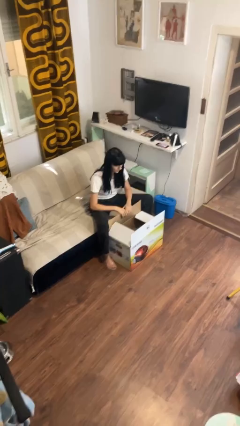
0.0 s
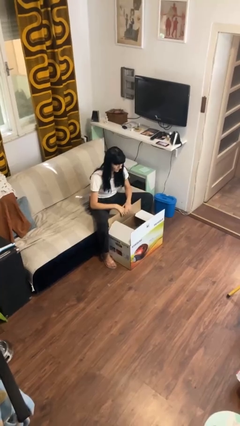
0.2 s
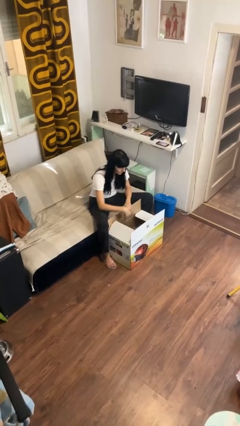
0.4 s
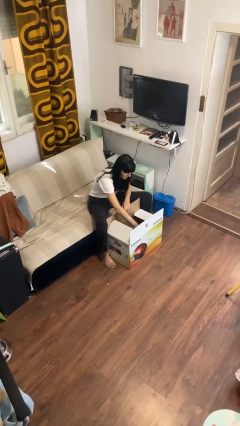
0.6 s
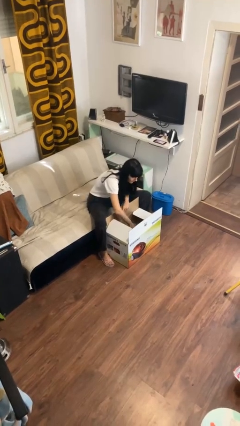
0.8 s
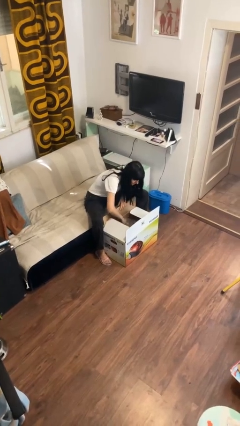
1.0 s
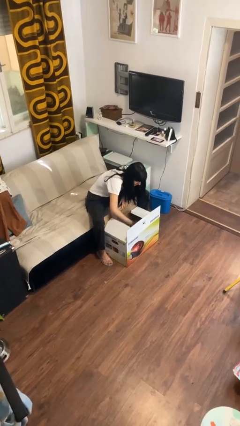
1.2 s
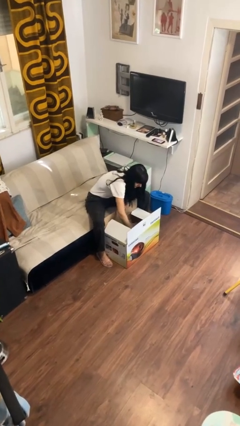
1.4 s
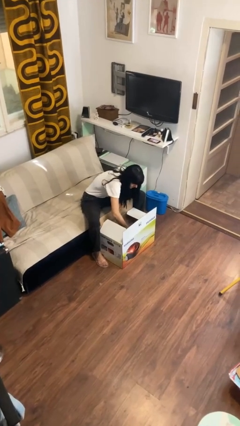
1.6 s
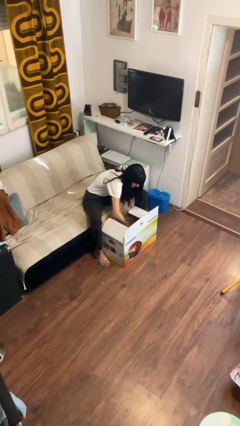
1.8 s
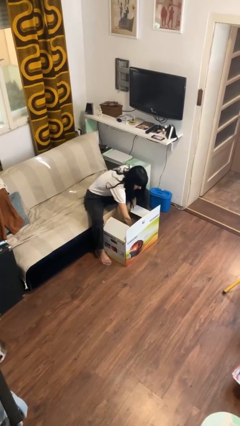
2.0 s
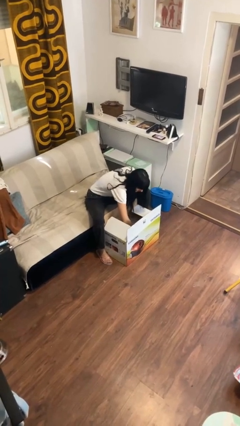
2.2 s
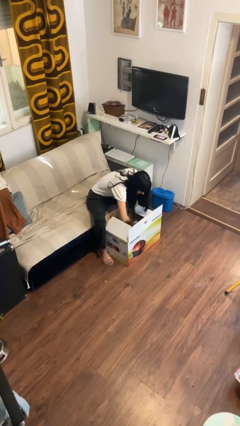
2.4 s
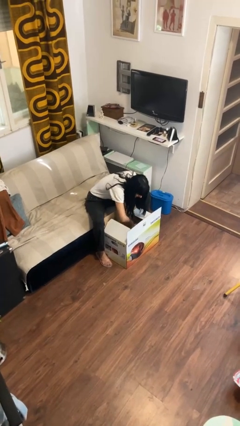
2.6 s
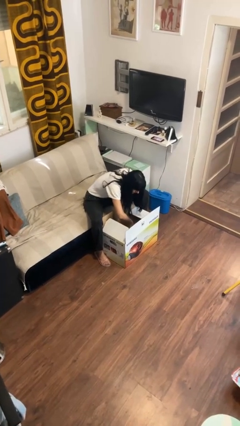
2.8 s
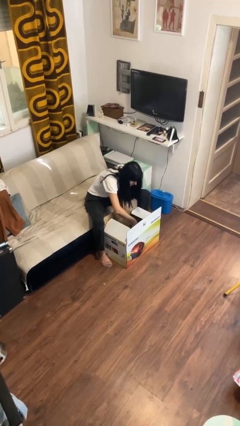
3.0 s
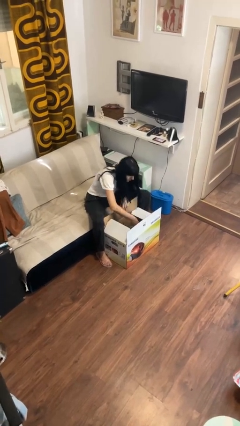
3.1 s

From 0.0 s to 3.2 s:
person searches in box

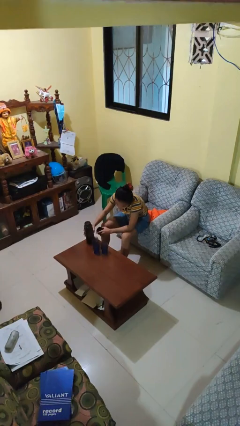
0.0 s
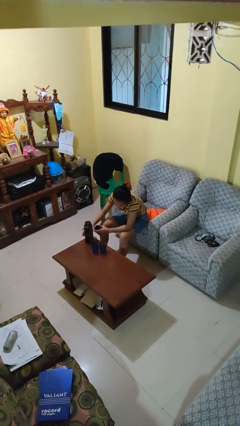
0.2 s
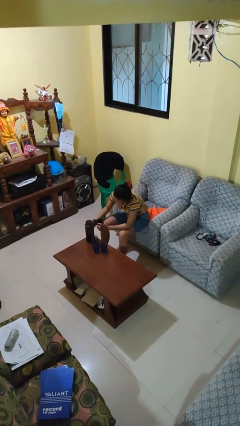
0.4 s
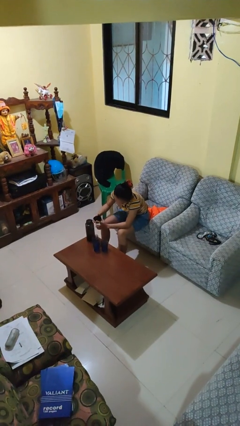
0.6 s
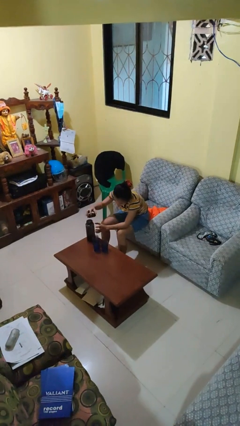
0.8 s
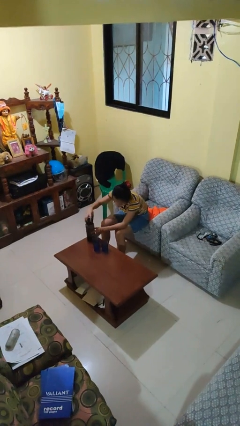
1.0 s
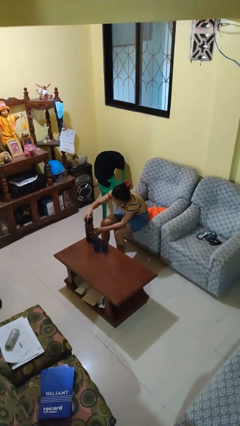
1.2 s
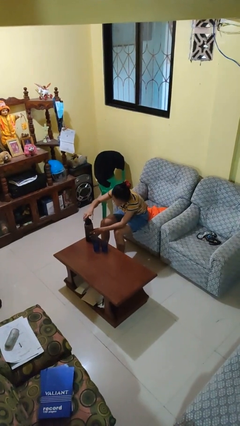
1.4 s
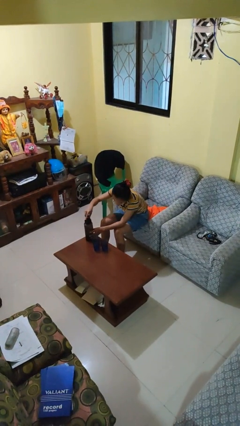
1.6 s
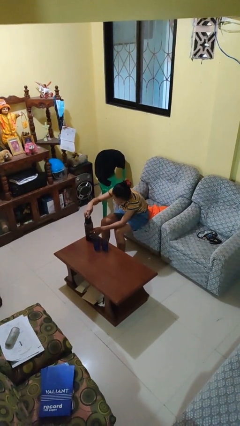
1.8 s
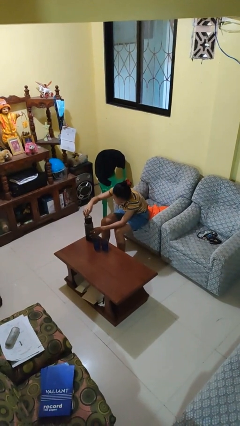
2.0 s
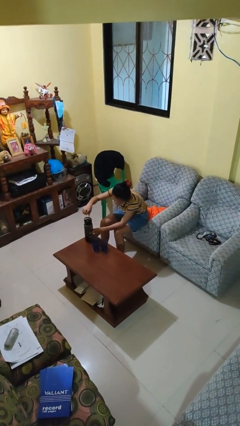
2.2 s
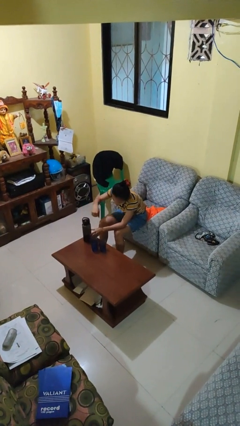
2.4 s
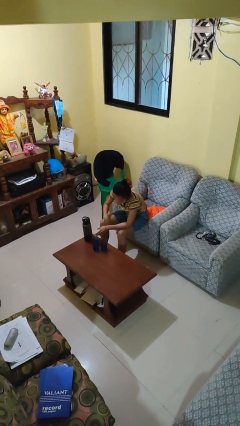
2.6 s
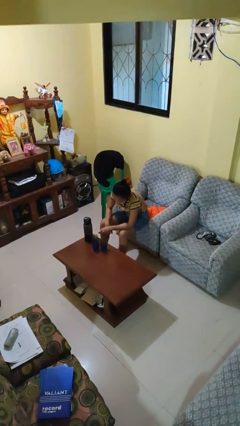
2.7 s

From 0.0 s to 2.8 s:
person screws lid to bottle

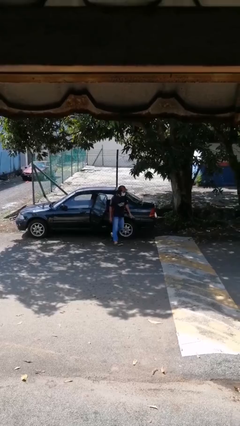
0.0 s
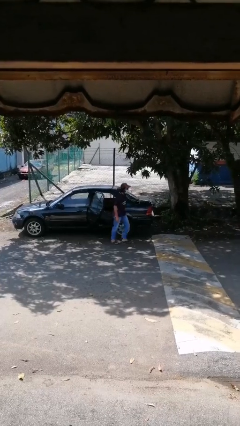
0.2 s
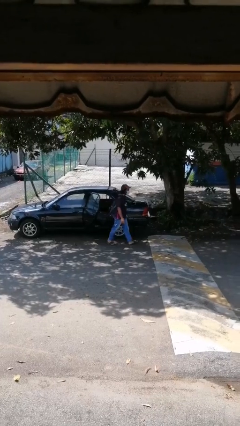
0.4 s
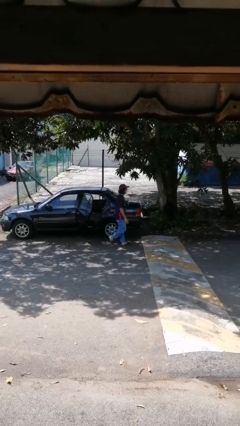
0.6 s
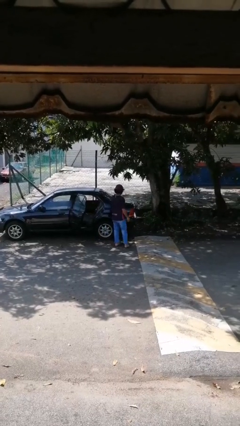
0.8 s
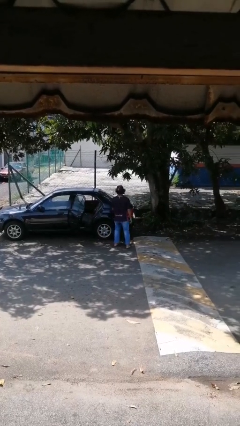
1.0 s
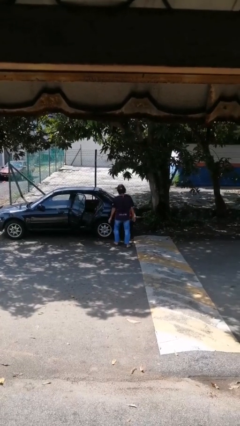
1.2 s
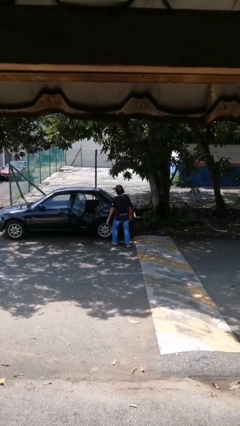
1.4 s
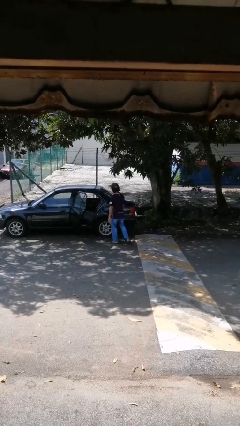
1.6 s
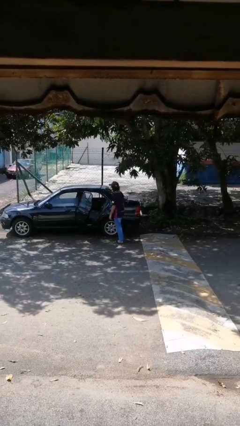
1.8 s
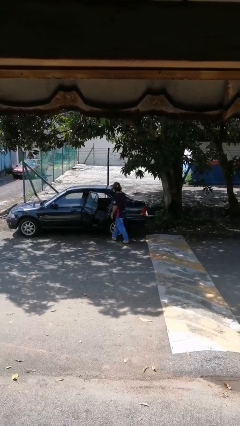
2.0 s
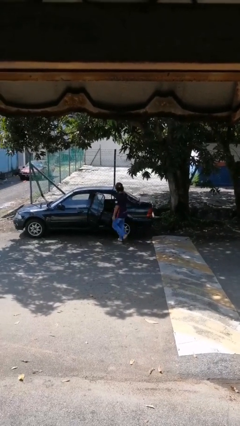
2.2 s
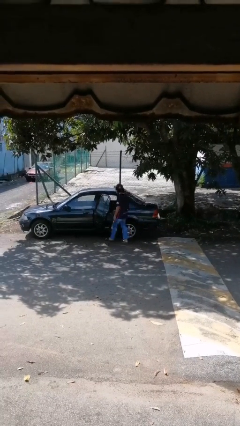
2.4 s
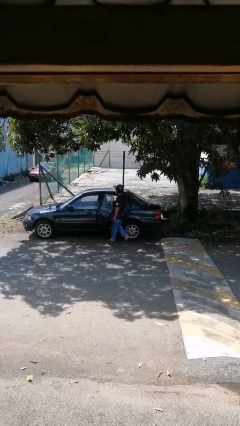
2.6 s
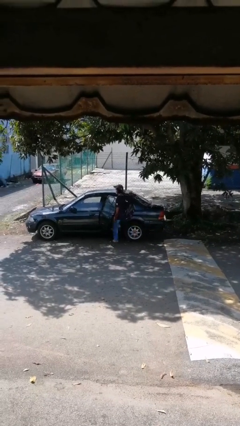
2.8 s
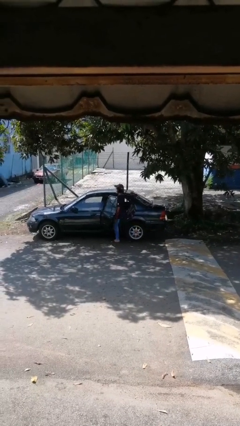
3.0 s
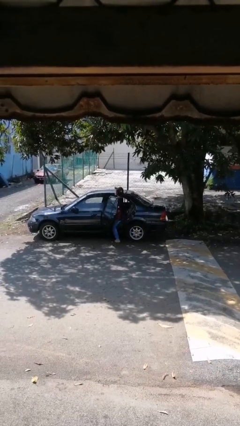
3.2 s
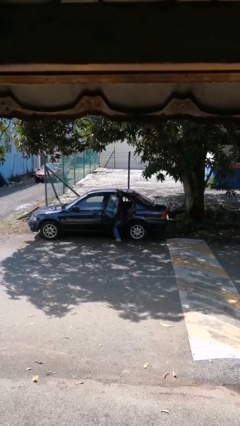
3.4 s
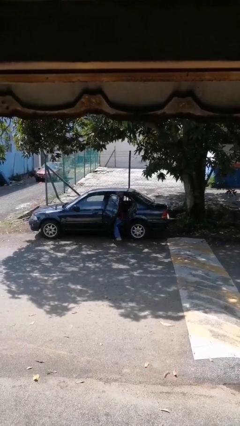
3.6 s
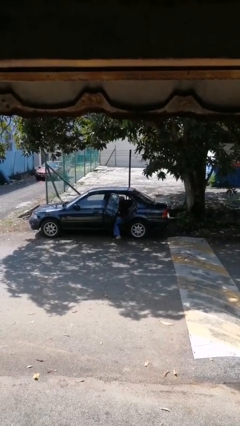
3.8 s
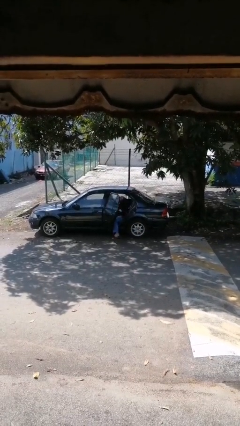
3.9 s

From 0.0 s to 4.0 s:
person exits car

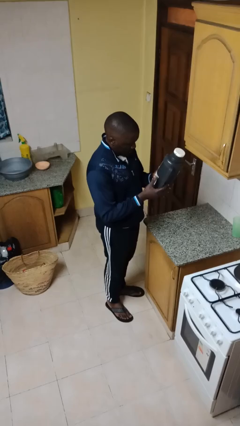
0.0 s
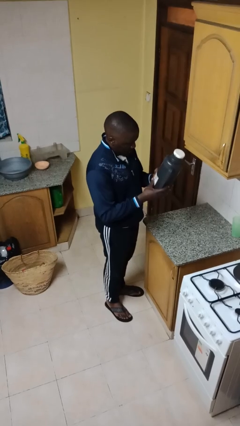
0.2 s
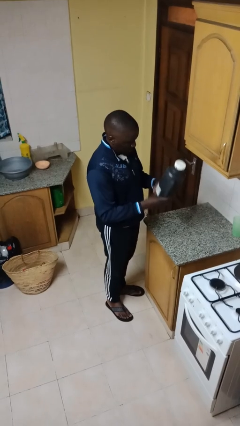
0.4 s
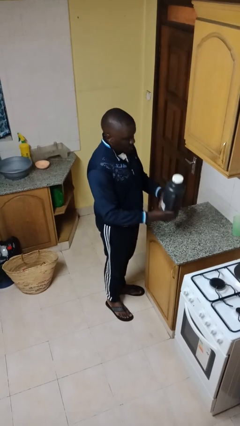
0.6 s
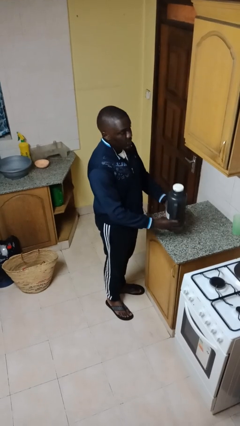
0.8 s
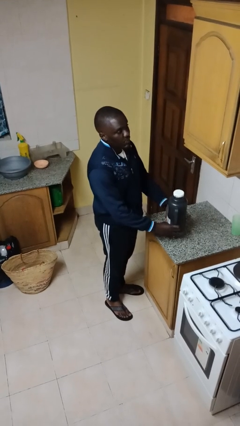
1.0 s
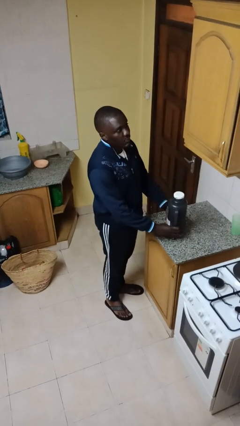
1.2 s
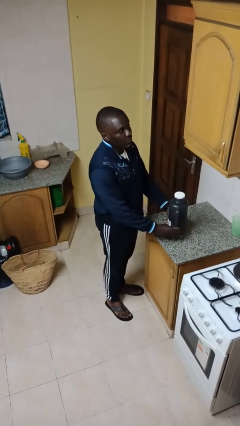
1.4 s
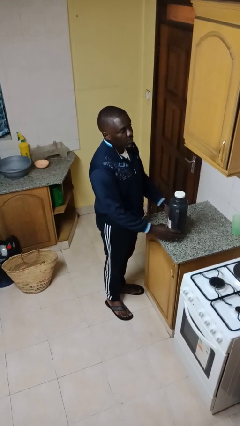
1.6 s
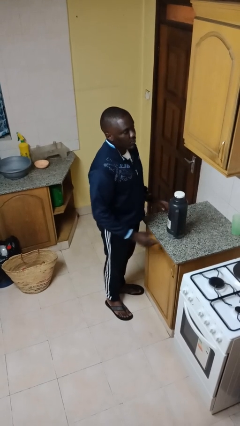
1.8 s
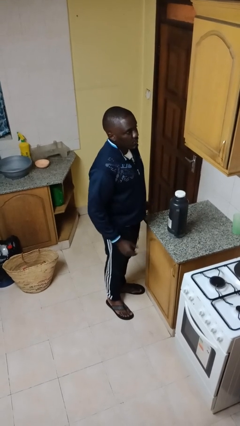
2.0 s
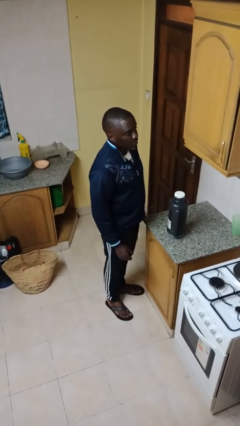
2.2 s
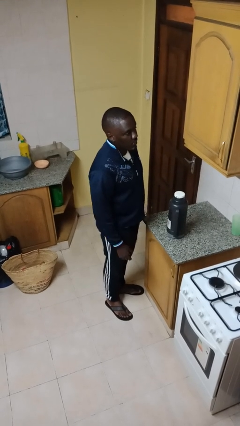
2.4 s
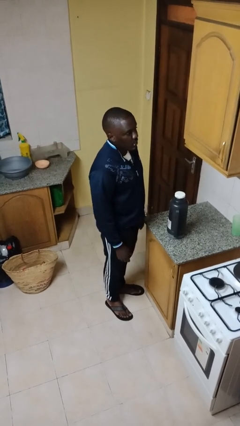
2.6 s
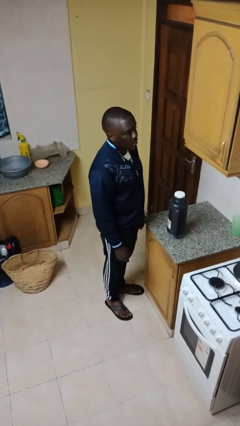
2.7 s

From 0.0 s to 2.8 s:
person puts down object on countertop

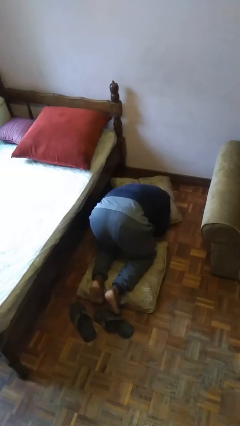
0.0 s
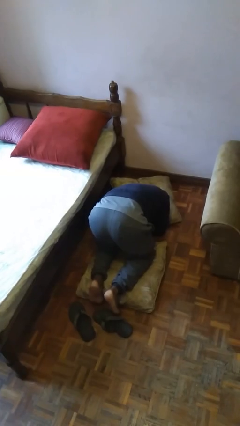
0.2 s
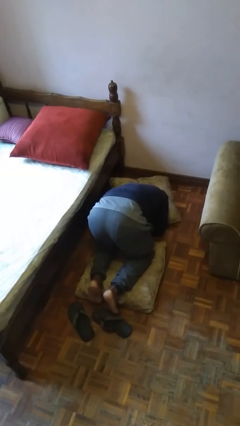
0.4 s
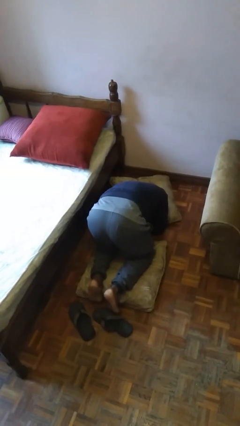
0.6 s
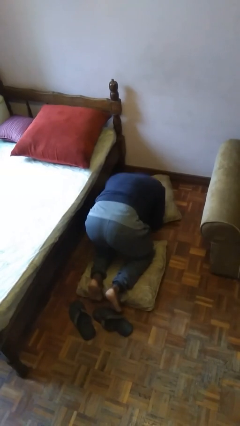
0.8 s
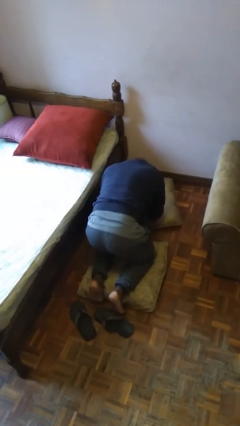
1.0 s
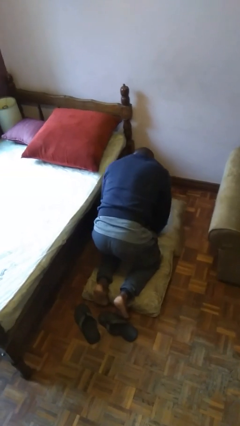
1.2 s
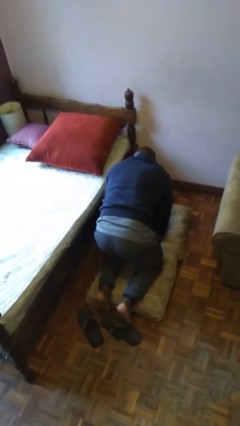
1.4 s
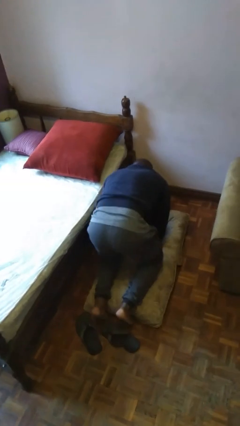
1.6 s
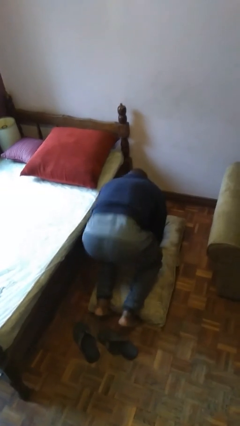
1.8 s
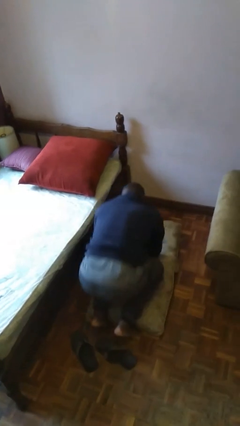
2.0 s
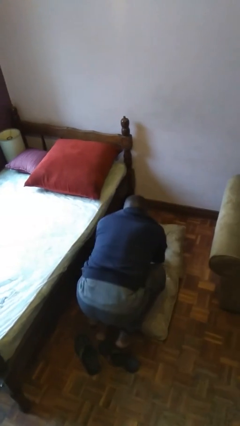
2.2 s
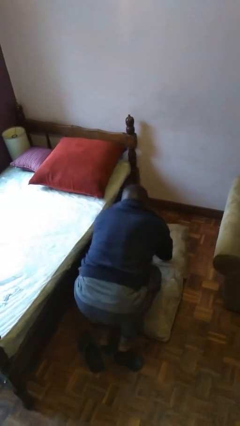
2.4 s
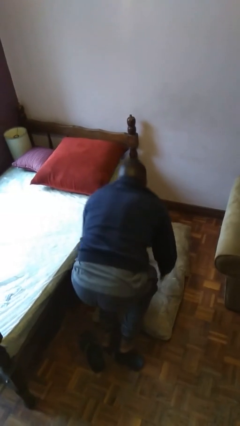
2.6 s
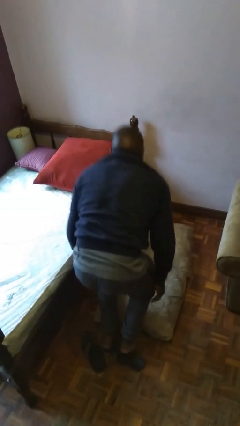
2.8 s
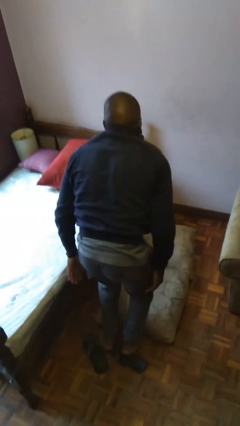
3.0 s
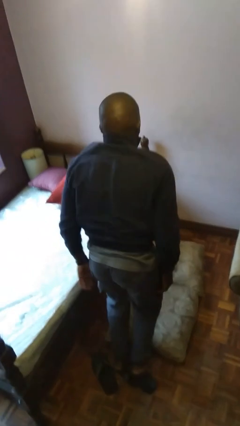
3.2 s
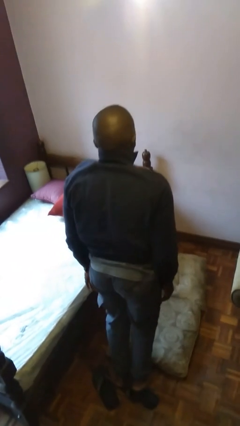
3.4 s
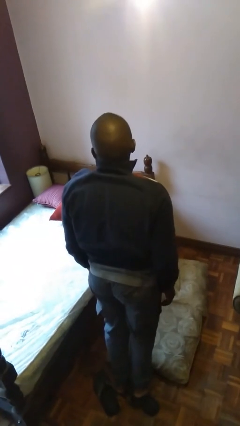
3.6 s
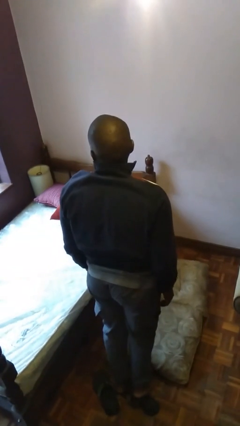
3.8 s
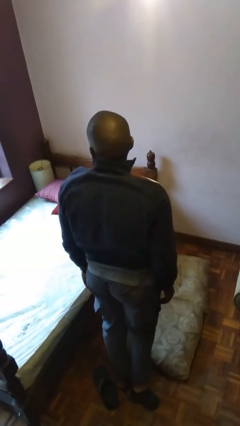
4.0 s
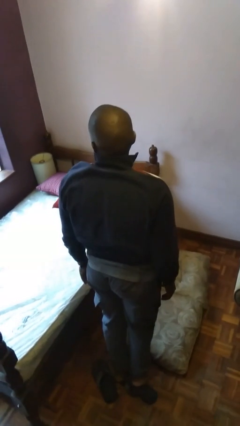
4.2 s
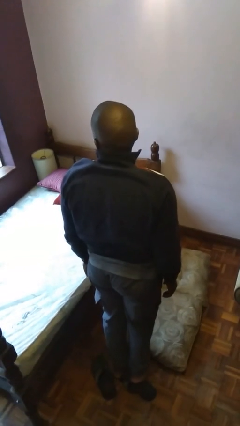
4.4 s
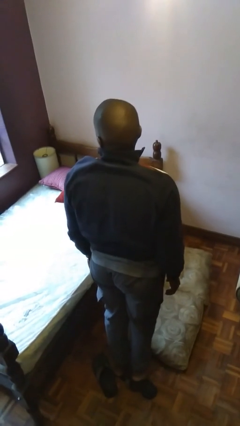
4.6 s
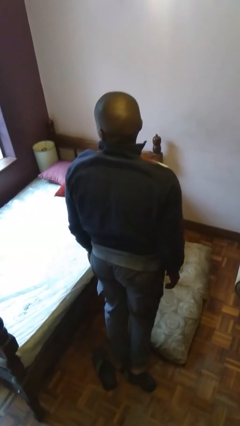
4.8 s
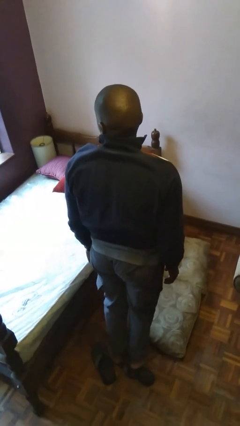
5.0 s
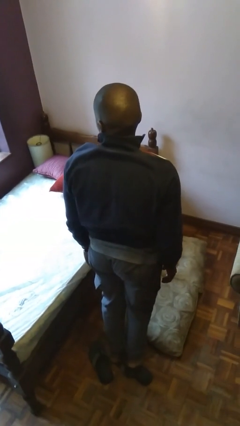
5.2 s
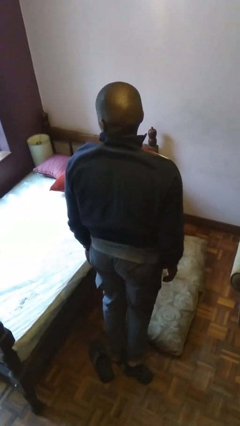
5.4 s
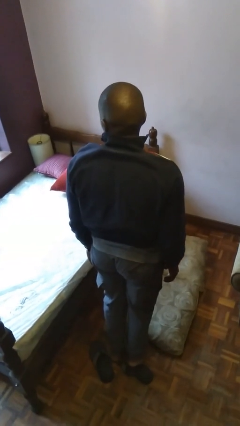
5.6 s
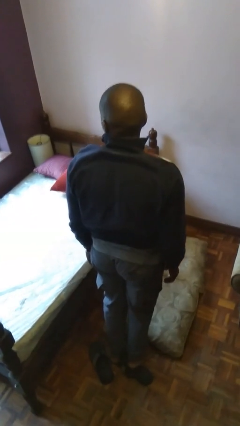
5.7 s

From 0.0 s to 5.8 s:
person stands up from floor
